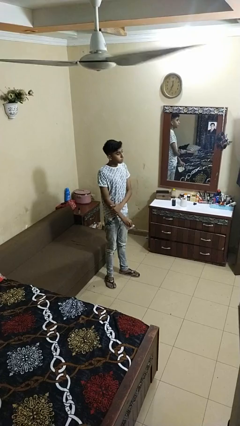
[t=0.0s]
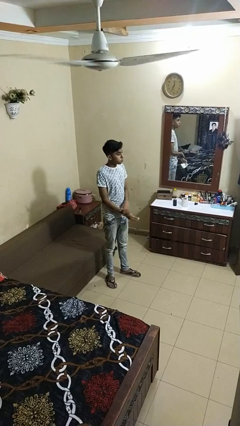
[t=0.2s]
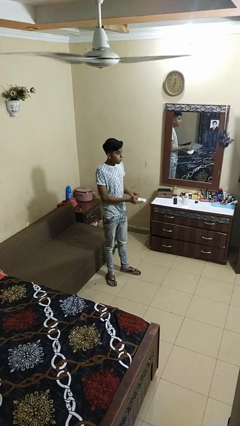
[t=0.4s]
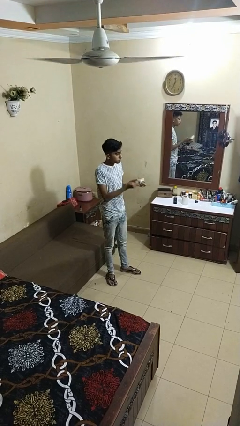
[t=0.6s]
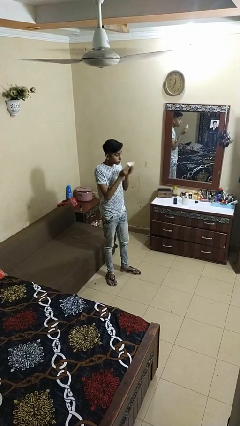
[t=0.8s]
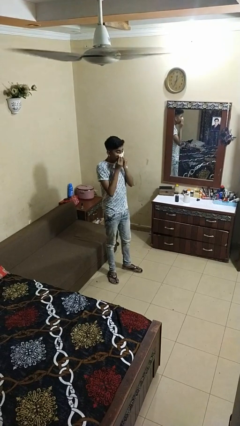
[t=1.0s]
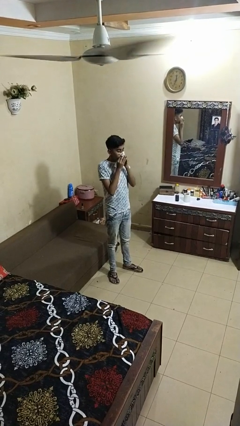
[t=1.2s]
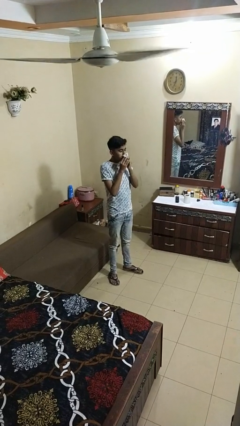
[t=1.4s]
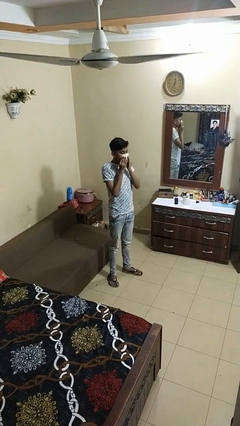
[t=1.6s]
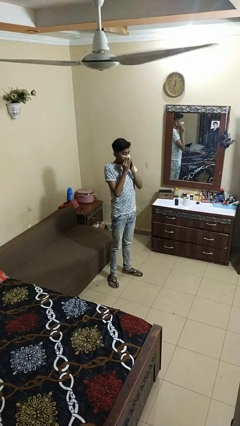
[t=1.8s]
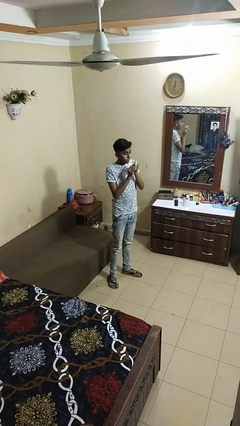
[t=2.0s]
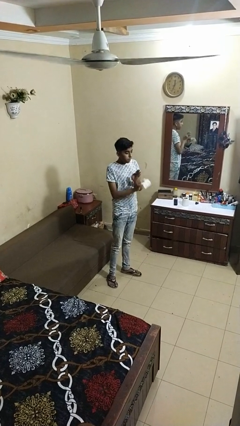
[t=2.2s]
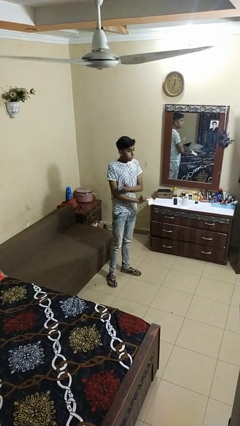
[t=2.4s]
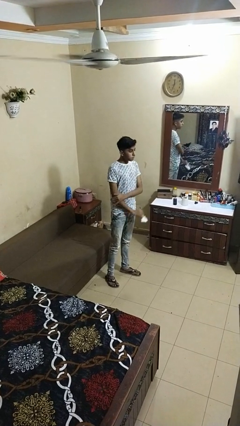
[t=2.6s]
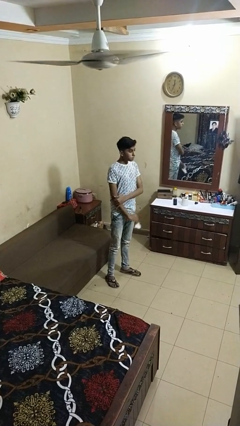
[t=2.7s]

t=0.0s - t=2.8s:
person blows nose

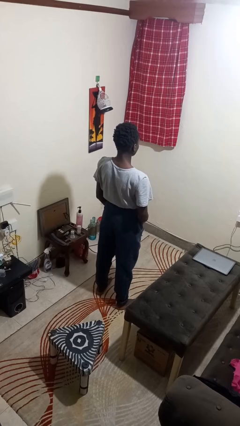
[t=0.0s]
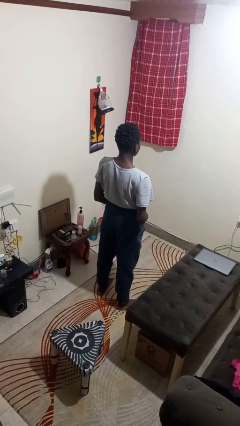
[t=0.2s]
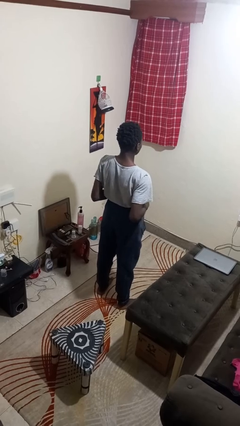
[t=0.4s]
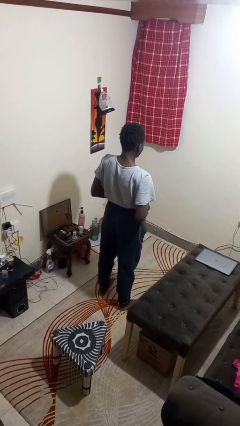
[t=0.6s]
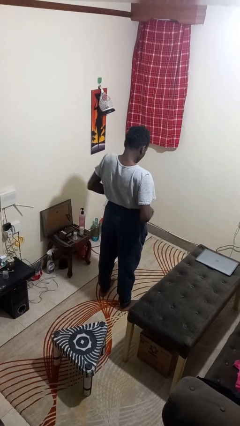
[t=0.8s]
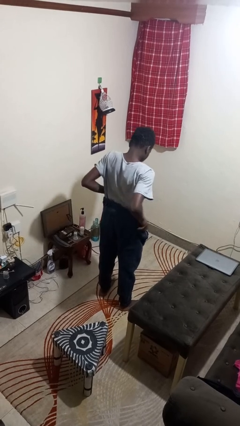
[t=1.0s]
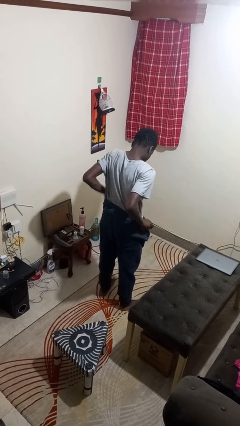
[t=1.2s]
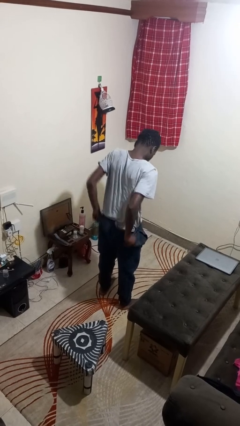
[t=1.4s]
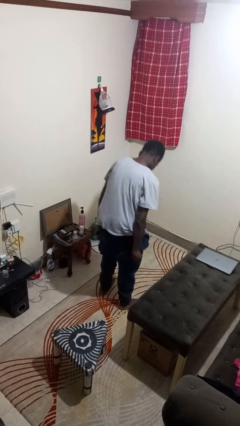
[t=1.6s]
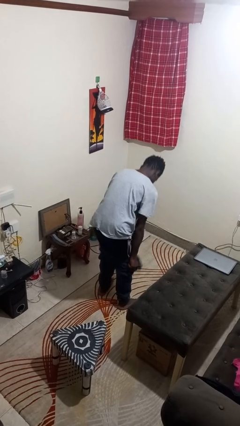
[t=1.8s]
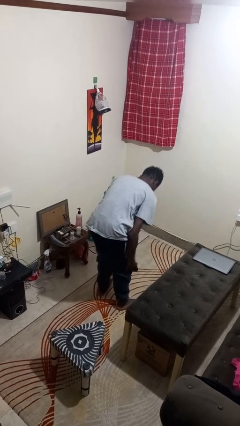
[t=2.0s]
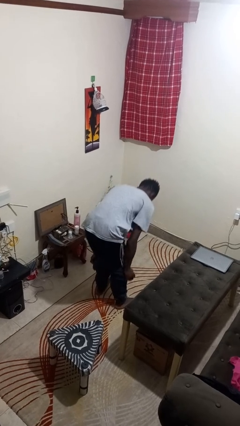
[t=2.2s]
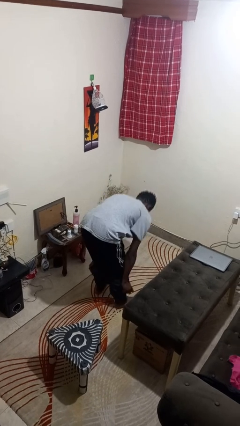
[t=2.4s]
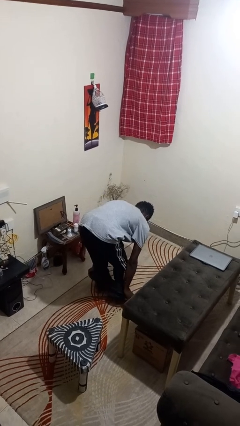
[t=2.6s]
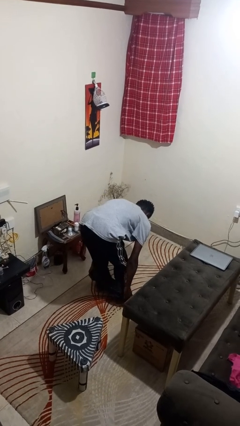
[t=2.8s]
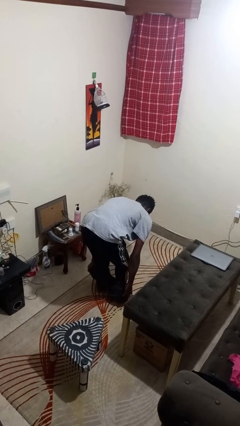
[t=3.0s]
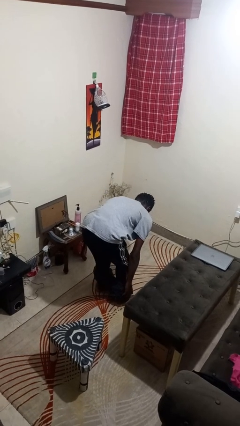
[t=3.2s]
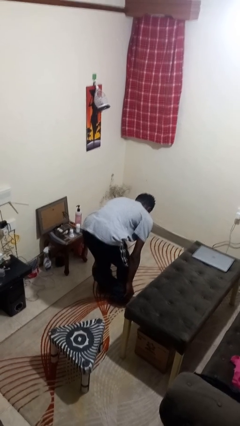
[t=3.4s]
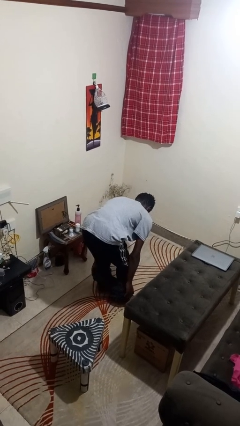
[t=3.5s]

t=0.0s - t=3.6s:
person takes off pants

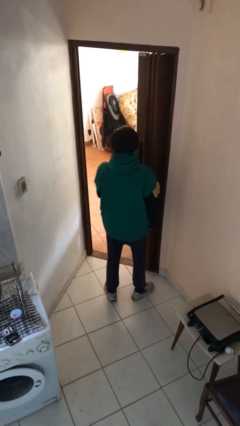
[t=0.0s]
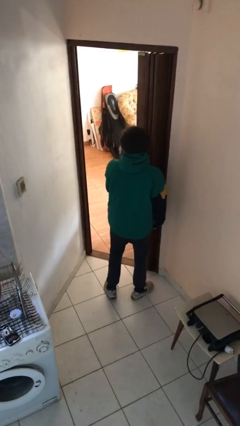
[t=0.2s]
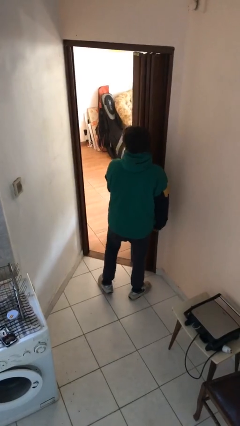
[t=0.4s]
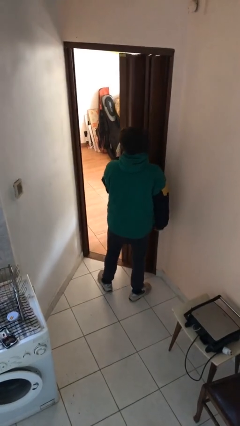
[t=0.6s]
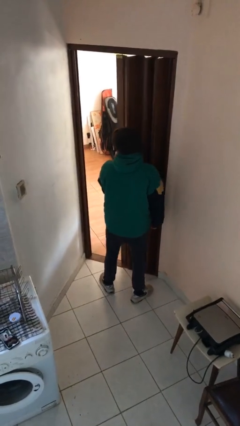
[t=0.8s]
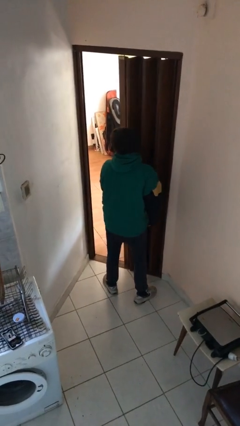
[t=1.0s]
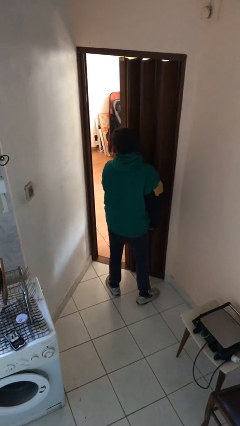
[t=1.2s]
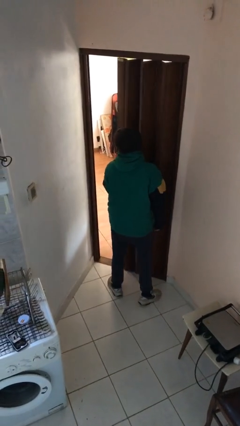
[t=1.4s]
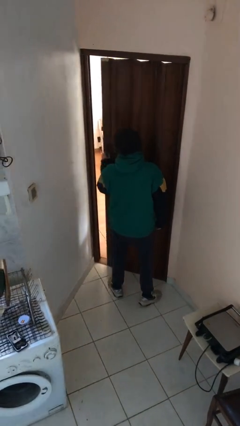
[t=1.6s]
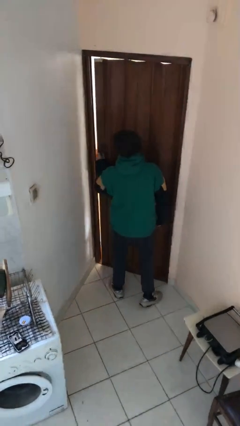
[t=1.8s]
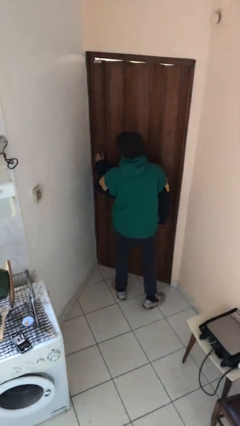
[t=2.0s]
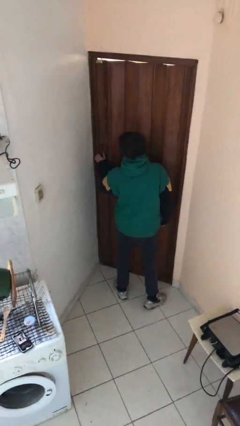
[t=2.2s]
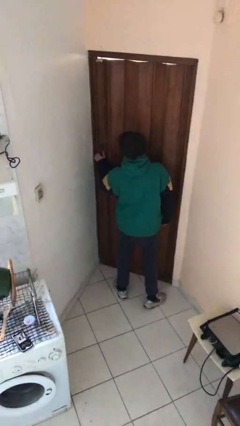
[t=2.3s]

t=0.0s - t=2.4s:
person closes sliding door

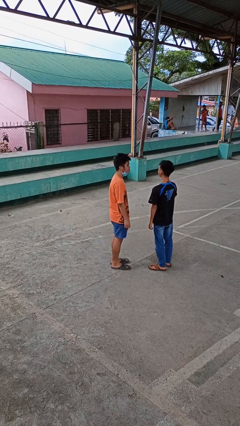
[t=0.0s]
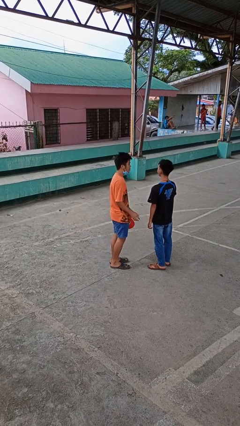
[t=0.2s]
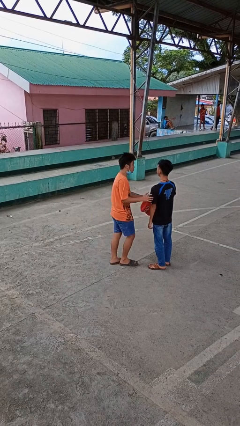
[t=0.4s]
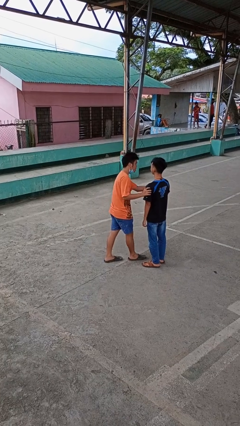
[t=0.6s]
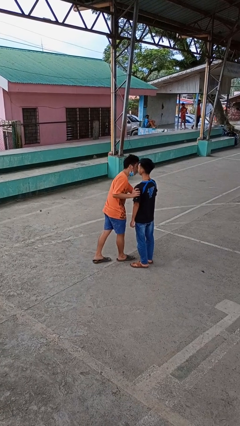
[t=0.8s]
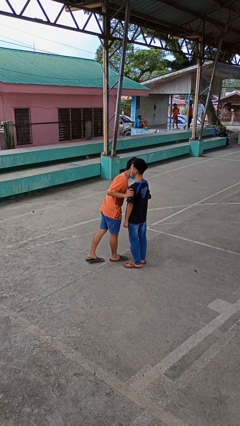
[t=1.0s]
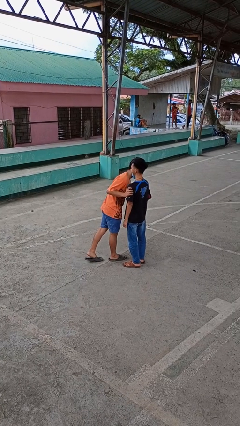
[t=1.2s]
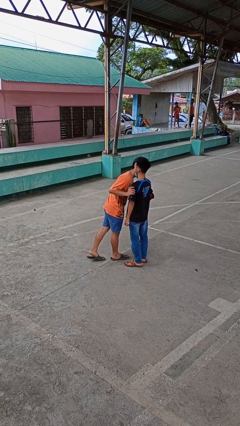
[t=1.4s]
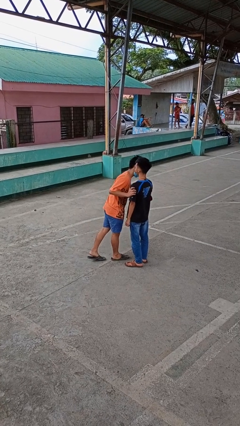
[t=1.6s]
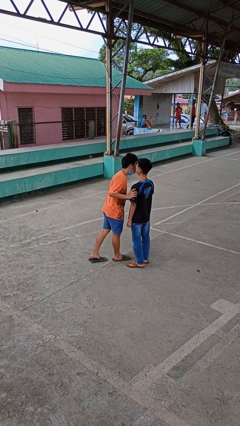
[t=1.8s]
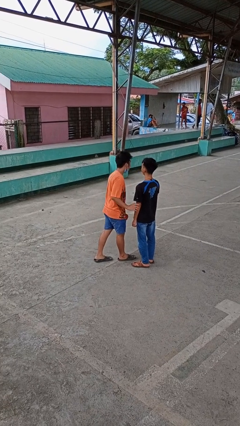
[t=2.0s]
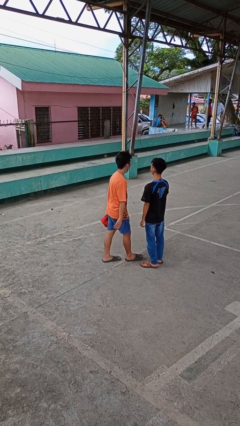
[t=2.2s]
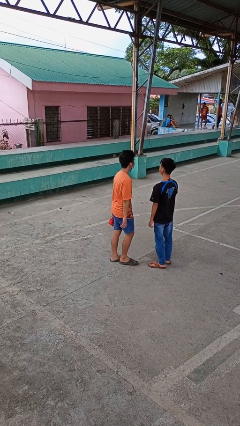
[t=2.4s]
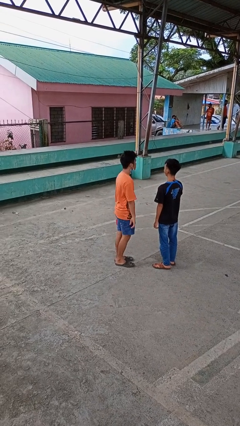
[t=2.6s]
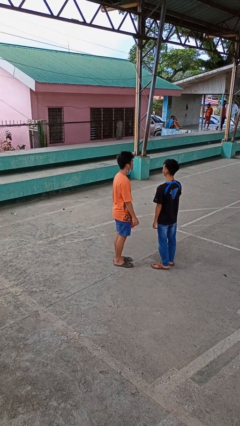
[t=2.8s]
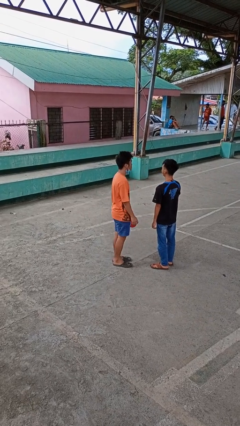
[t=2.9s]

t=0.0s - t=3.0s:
person kisses cheek of person

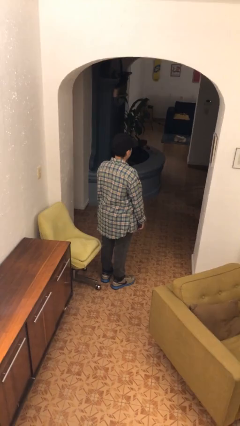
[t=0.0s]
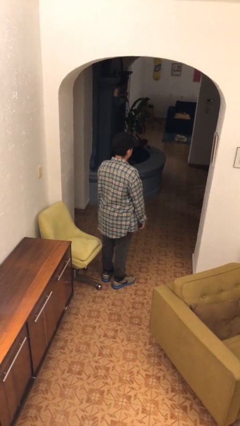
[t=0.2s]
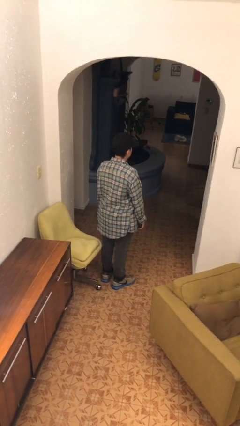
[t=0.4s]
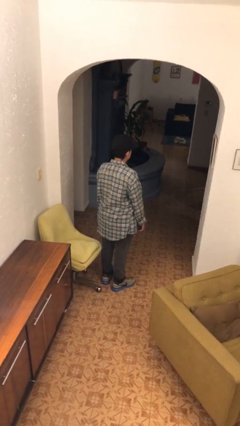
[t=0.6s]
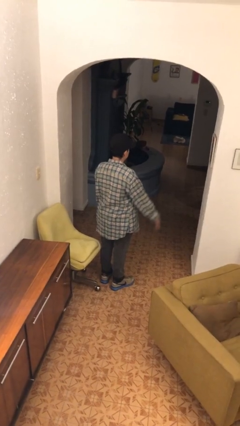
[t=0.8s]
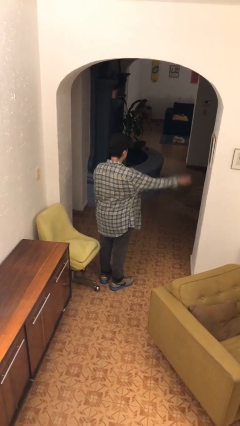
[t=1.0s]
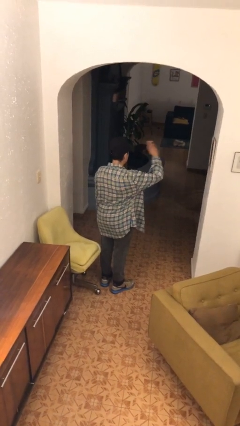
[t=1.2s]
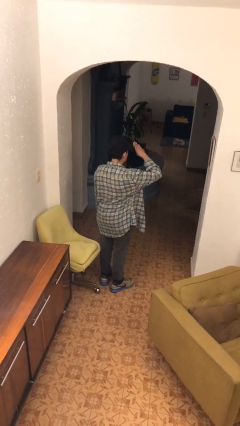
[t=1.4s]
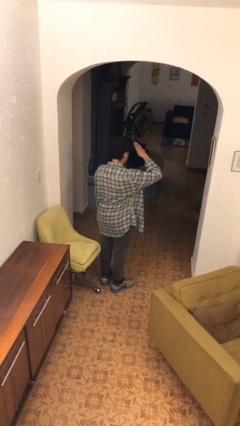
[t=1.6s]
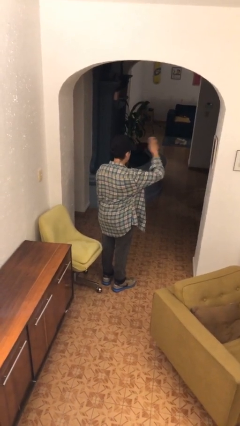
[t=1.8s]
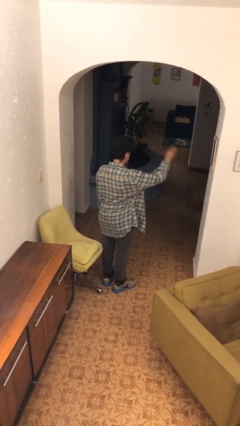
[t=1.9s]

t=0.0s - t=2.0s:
person salutes

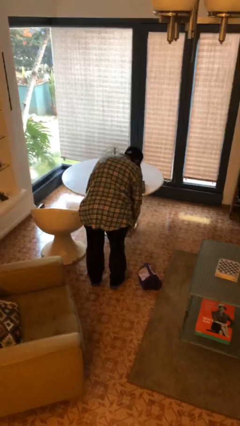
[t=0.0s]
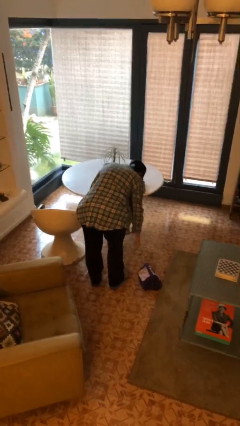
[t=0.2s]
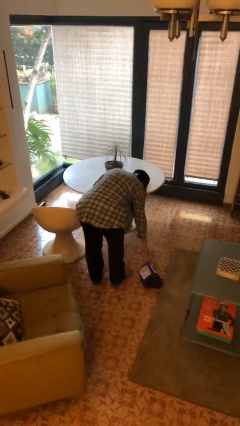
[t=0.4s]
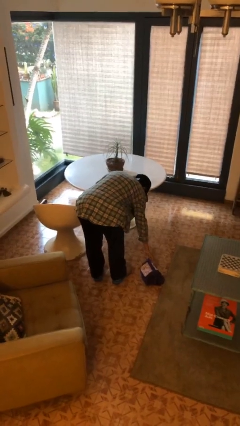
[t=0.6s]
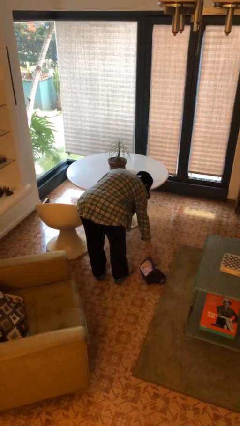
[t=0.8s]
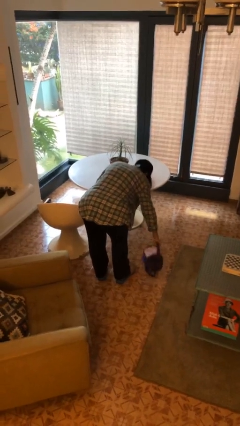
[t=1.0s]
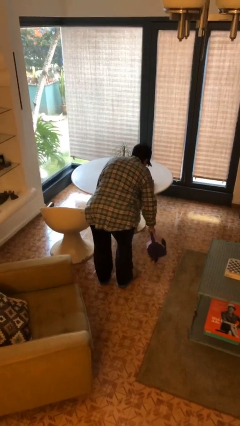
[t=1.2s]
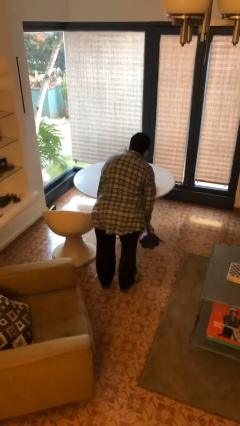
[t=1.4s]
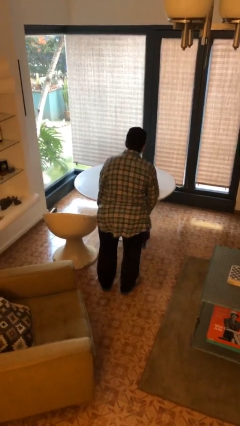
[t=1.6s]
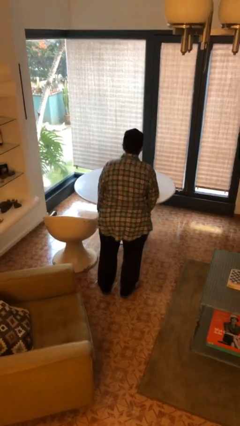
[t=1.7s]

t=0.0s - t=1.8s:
person picks up object from floor

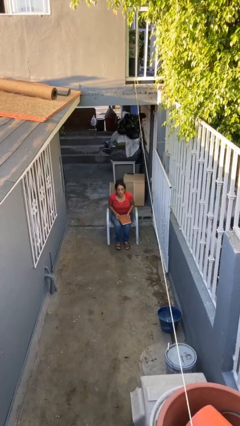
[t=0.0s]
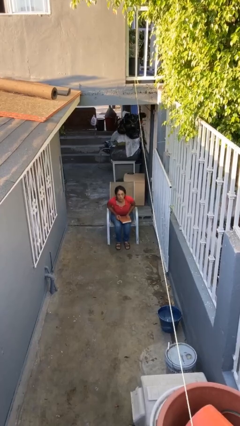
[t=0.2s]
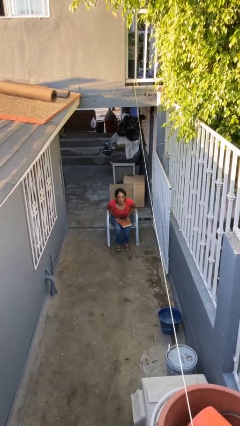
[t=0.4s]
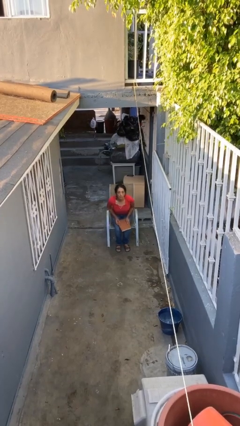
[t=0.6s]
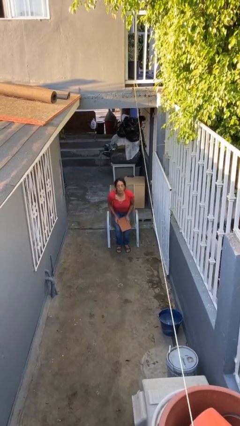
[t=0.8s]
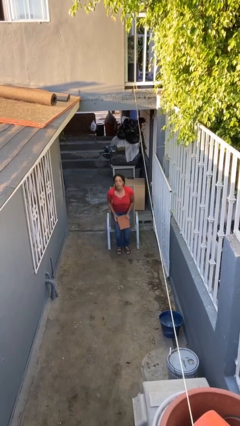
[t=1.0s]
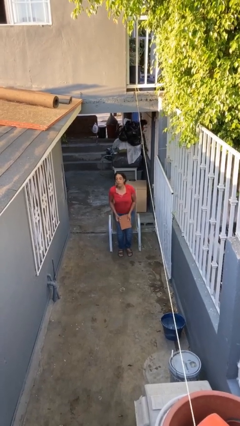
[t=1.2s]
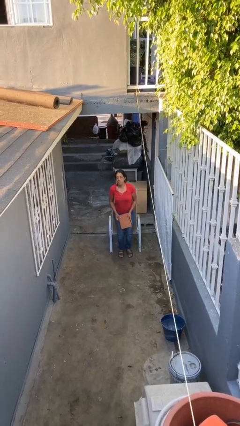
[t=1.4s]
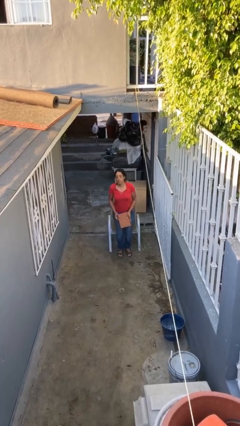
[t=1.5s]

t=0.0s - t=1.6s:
person stands up
